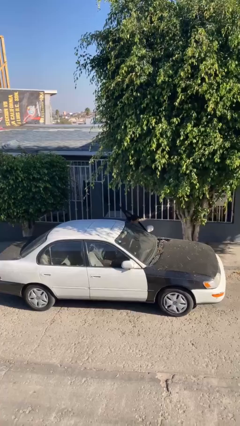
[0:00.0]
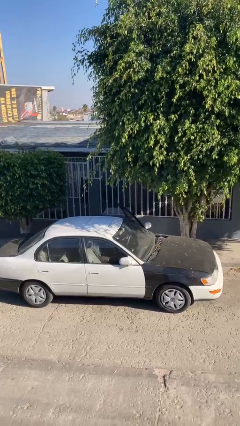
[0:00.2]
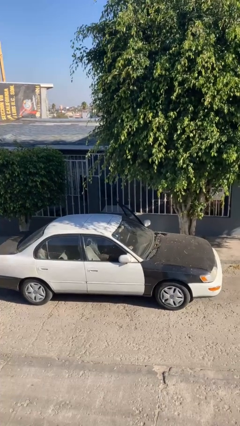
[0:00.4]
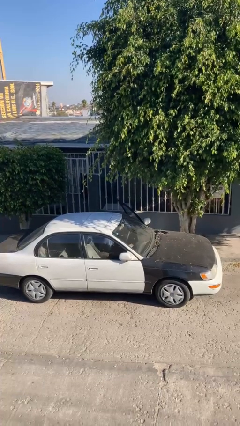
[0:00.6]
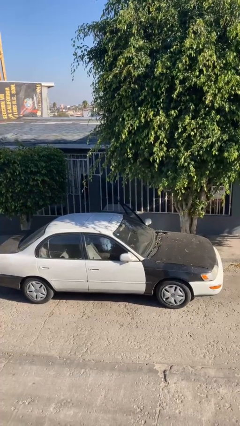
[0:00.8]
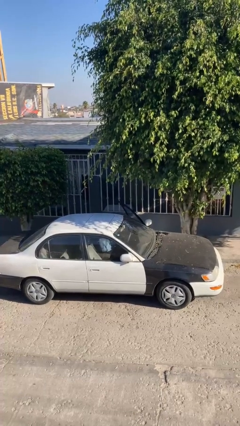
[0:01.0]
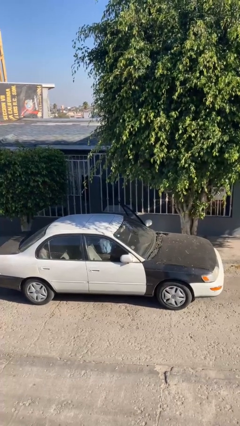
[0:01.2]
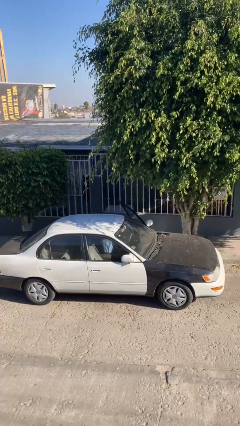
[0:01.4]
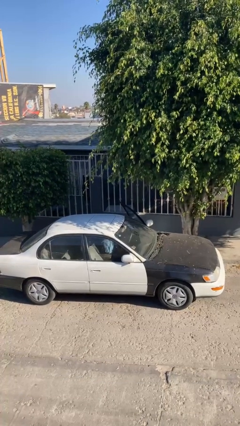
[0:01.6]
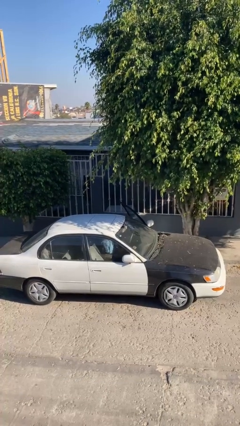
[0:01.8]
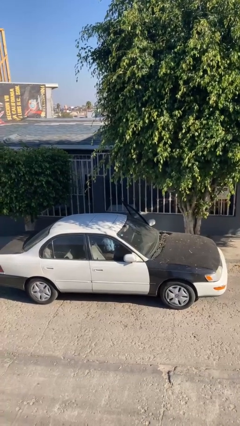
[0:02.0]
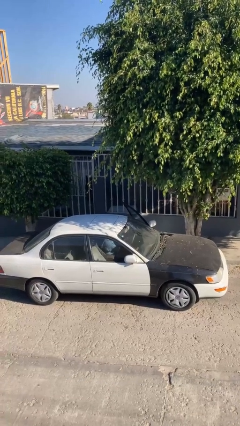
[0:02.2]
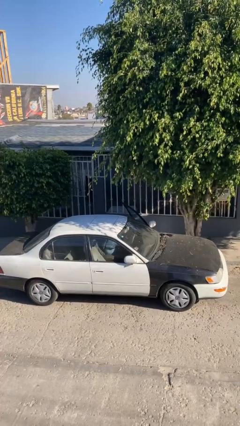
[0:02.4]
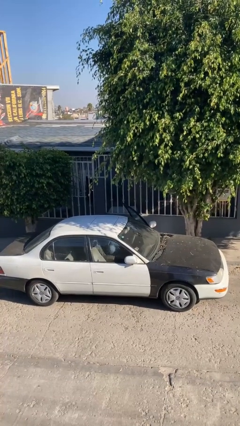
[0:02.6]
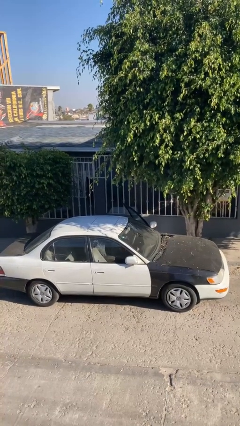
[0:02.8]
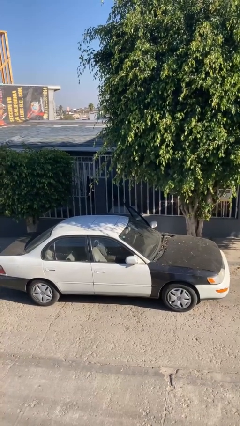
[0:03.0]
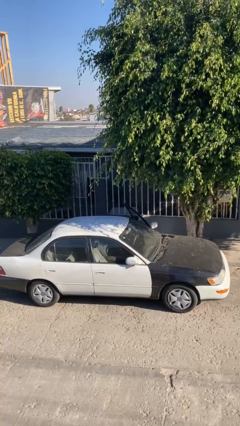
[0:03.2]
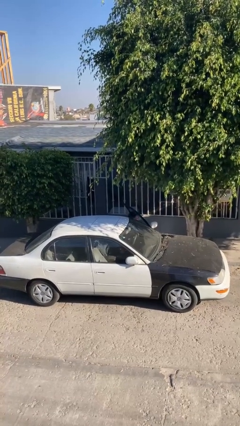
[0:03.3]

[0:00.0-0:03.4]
person enters car

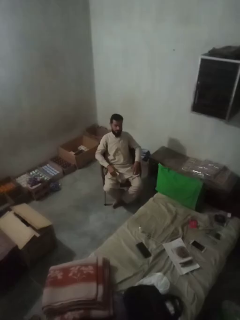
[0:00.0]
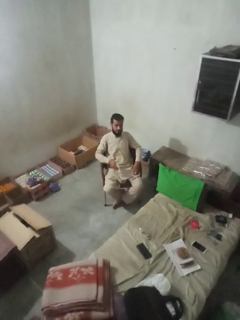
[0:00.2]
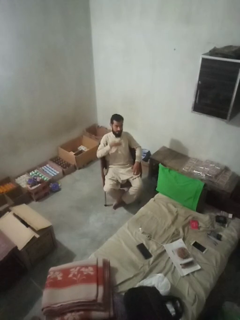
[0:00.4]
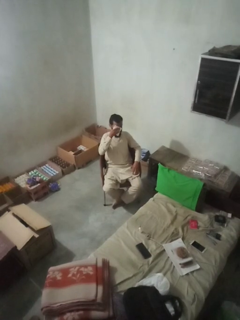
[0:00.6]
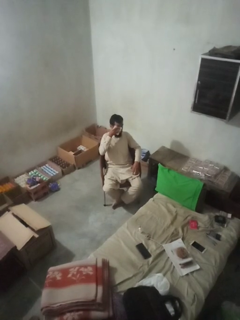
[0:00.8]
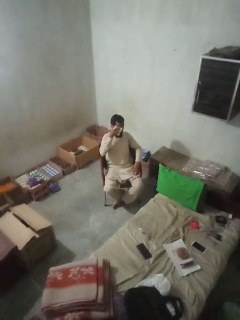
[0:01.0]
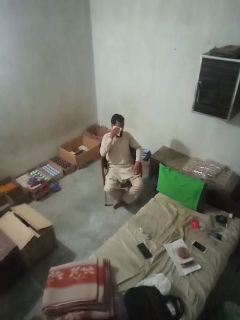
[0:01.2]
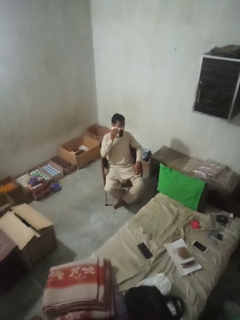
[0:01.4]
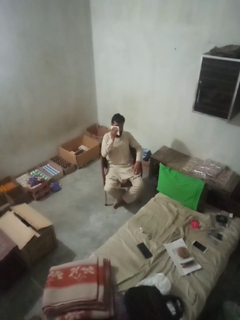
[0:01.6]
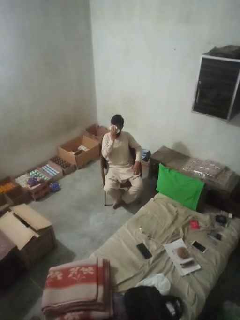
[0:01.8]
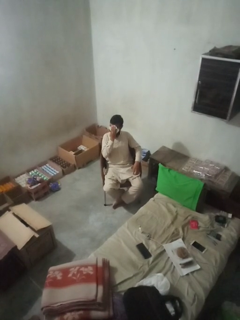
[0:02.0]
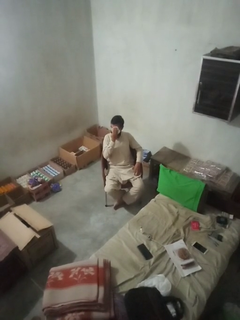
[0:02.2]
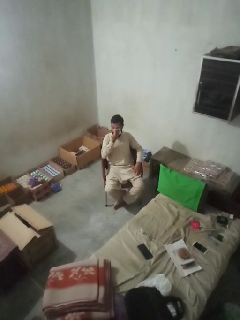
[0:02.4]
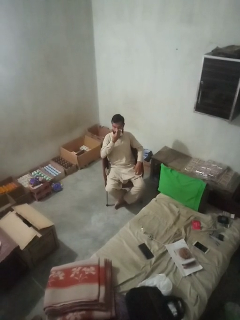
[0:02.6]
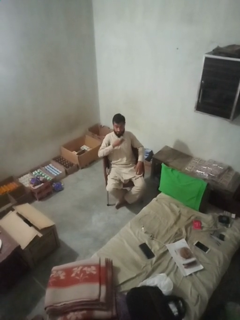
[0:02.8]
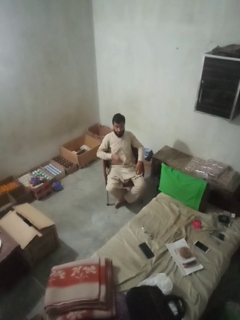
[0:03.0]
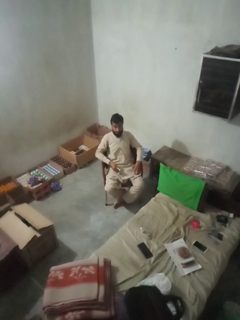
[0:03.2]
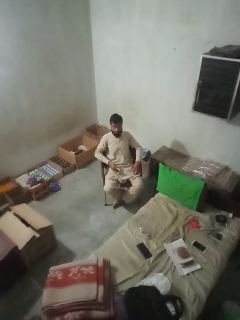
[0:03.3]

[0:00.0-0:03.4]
person wipes mouth with napkin

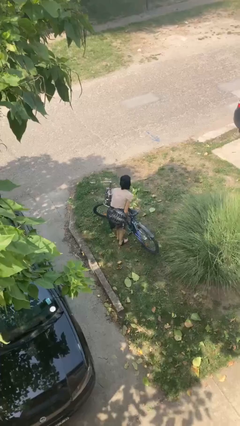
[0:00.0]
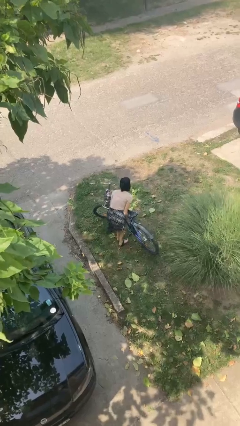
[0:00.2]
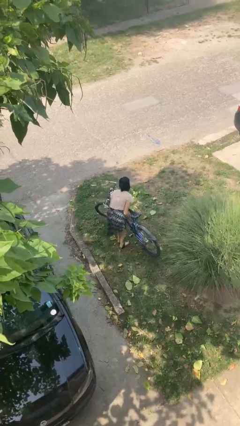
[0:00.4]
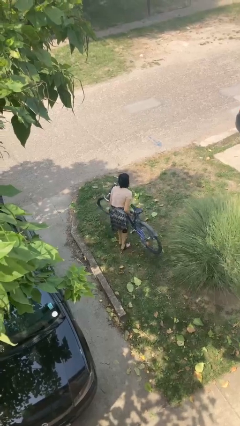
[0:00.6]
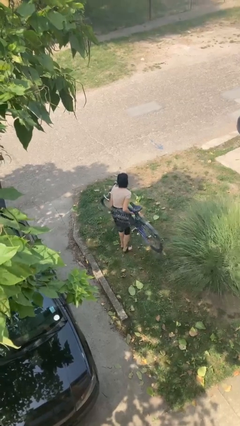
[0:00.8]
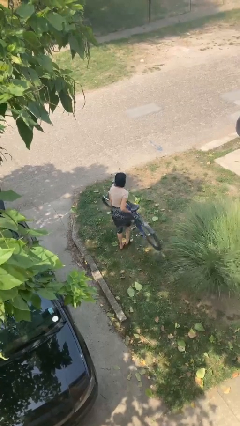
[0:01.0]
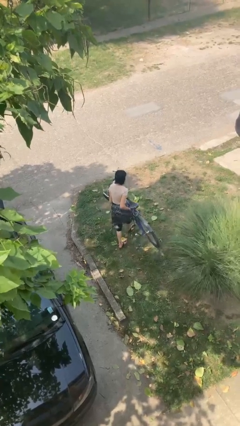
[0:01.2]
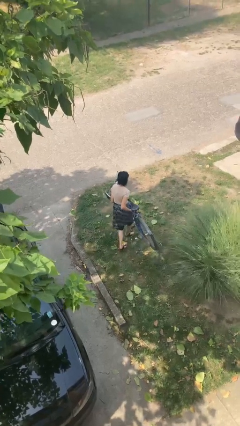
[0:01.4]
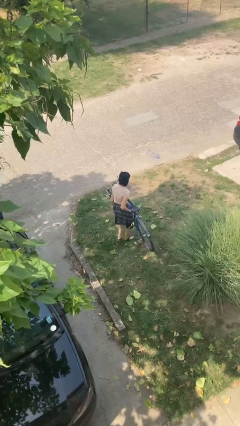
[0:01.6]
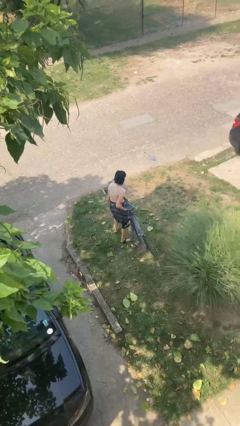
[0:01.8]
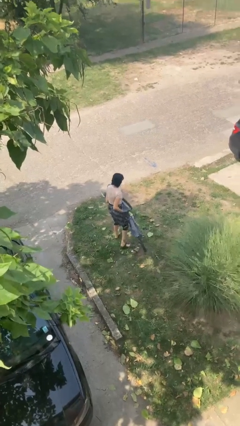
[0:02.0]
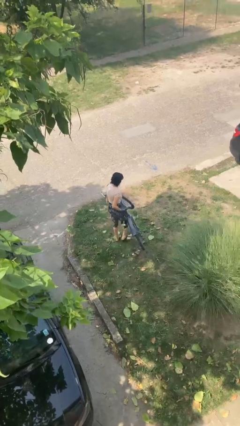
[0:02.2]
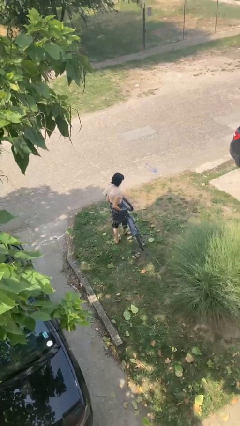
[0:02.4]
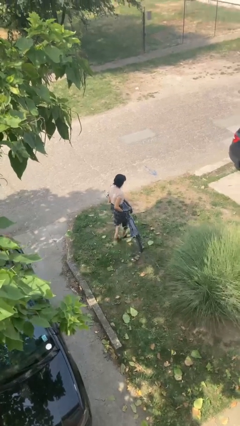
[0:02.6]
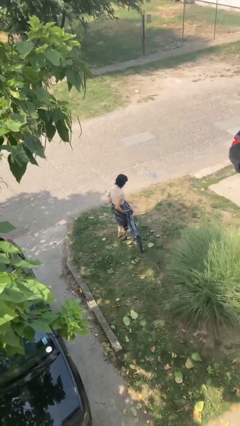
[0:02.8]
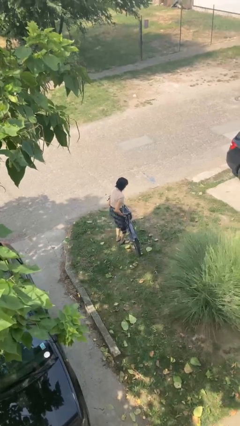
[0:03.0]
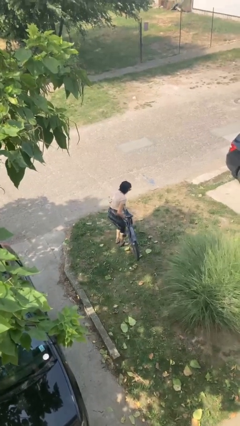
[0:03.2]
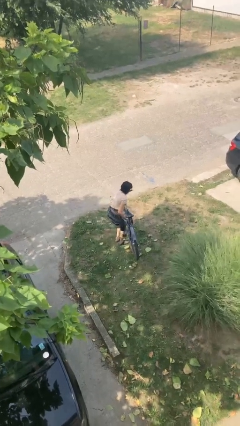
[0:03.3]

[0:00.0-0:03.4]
person carries bicycle

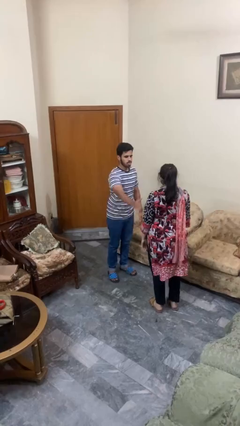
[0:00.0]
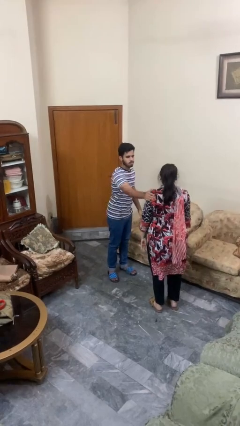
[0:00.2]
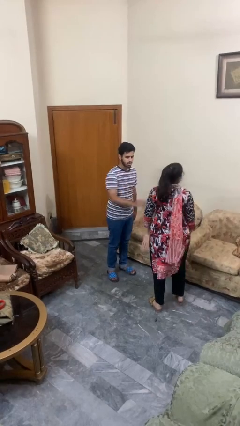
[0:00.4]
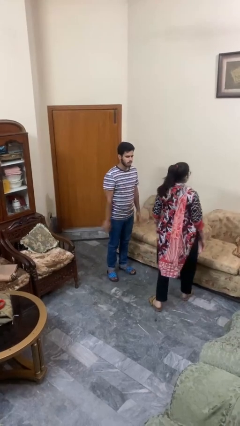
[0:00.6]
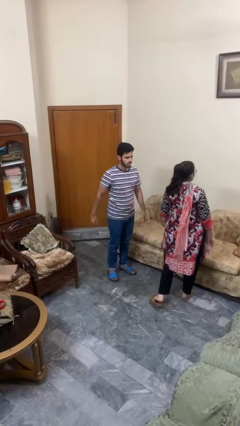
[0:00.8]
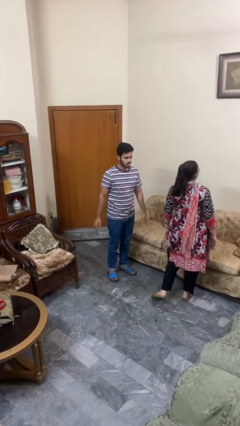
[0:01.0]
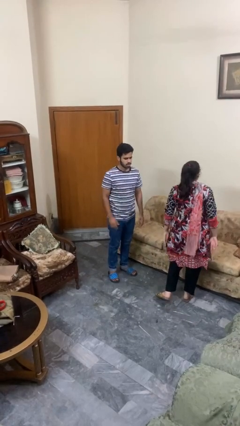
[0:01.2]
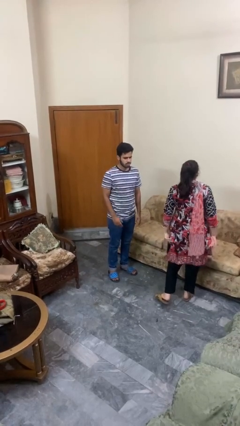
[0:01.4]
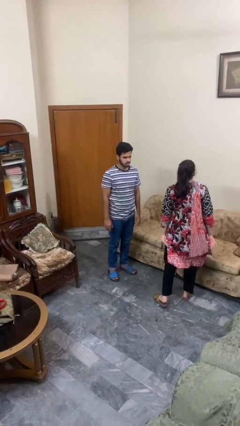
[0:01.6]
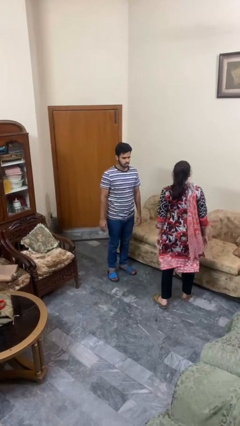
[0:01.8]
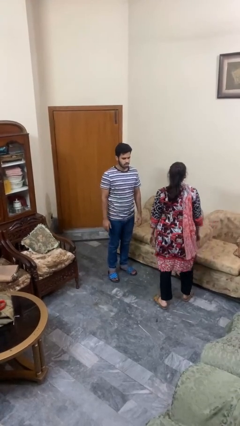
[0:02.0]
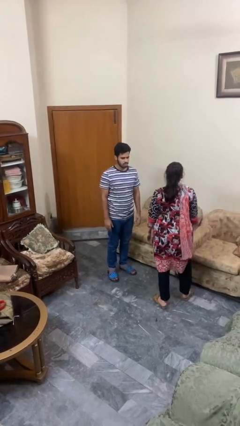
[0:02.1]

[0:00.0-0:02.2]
person shoves person

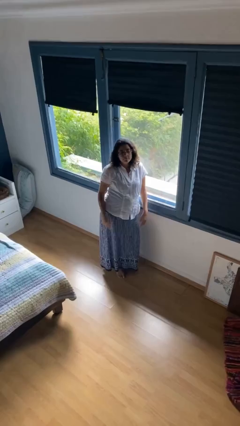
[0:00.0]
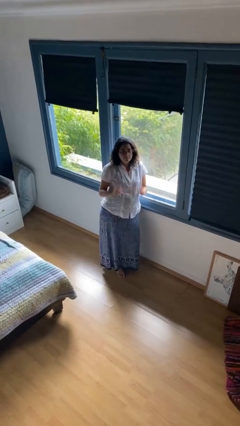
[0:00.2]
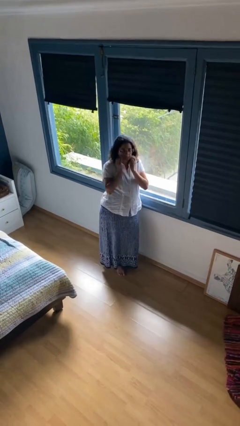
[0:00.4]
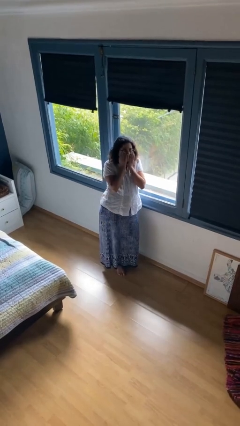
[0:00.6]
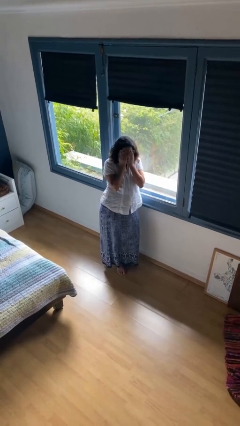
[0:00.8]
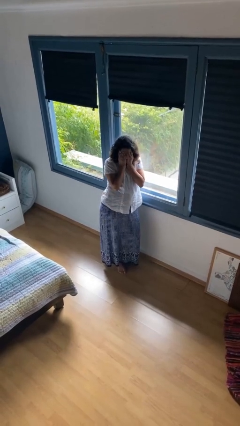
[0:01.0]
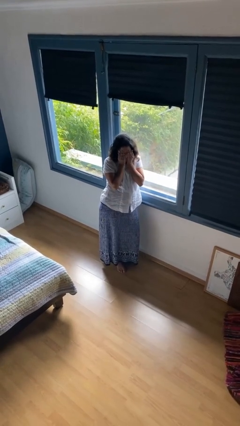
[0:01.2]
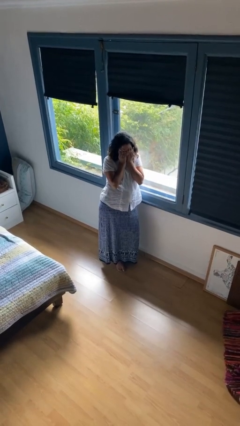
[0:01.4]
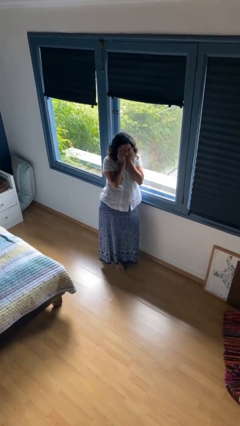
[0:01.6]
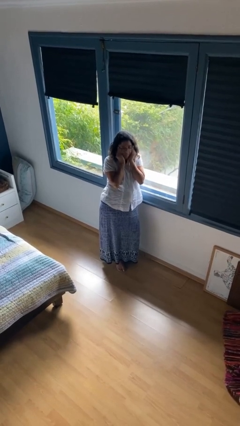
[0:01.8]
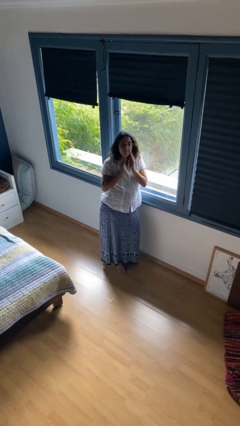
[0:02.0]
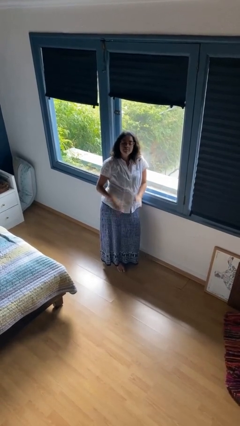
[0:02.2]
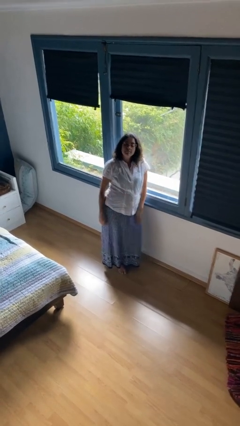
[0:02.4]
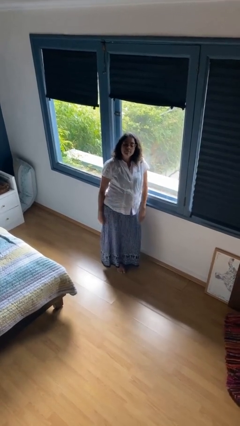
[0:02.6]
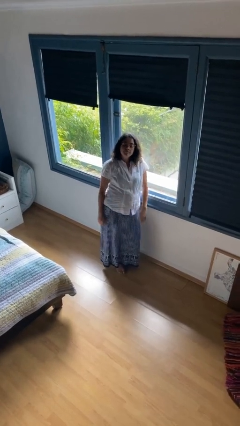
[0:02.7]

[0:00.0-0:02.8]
person rubs eyes

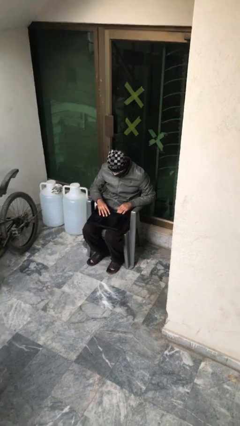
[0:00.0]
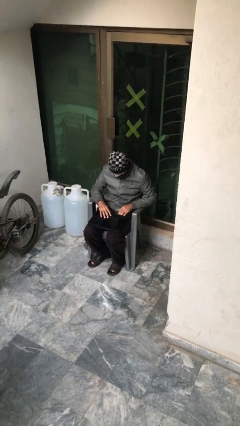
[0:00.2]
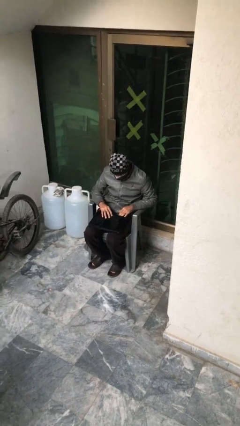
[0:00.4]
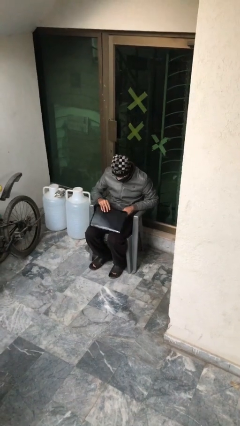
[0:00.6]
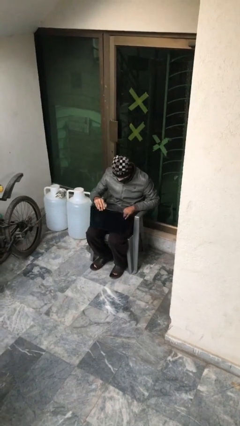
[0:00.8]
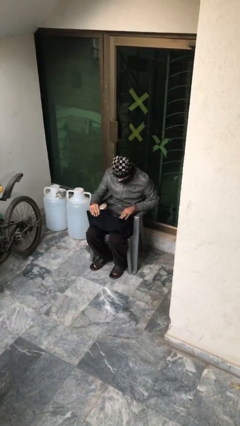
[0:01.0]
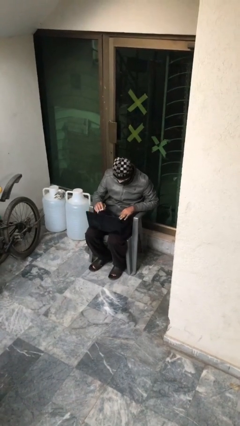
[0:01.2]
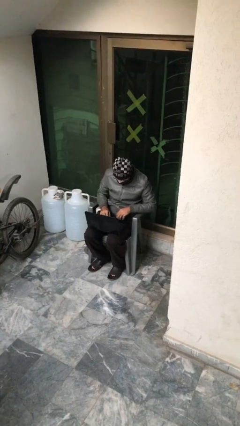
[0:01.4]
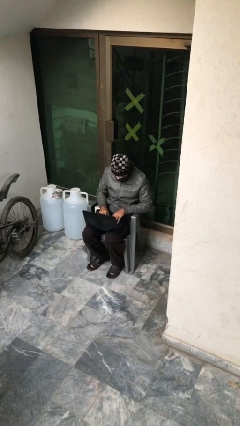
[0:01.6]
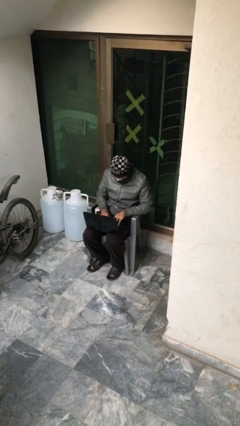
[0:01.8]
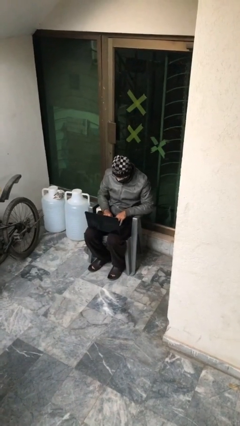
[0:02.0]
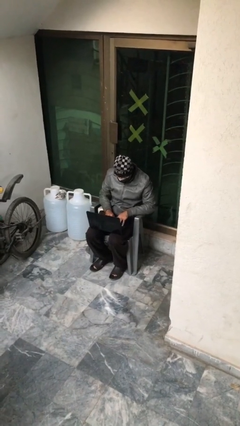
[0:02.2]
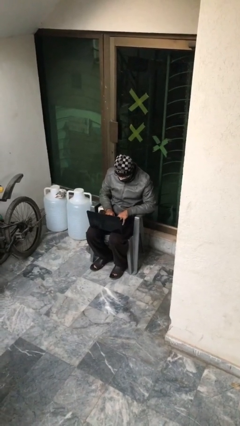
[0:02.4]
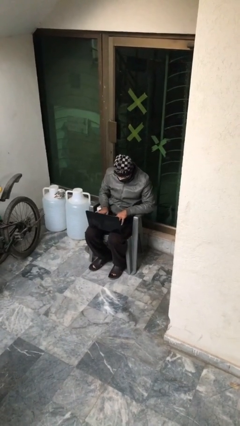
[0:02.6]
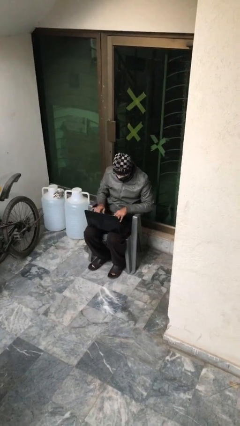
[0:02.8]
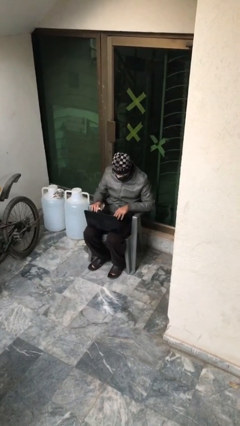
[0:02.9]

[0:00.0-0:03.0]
person interacts with laptop

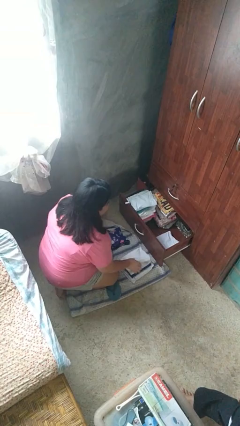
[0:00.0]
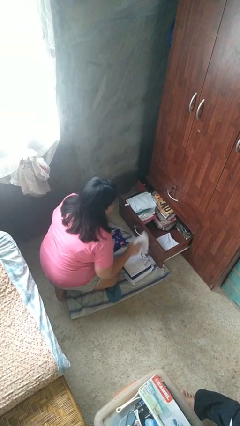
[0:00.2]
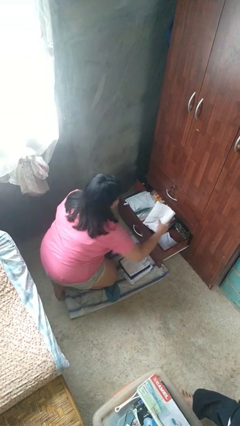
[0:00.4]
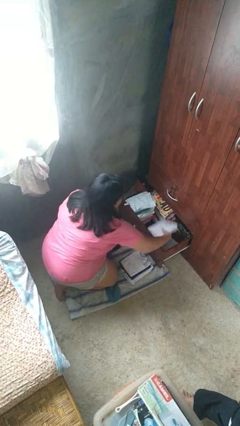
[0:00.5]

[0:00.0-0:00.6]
person puts clothes into dresser
